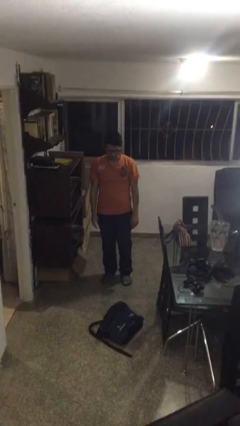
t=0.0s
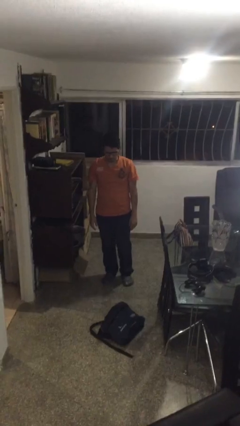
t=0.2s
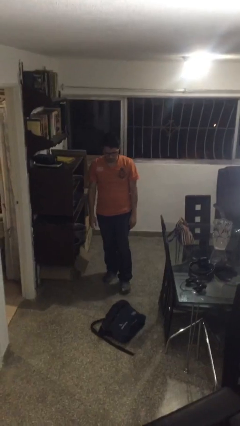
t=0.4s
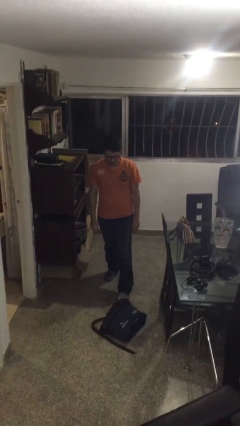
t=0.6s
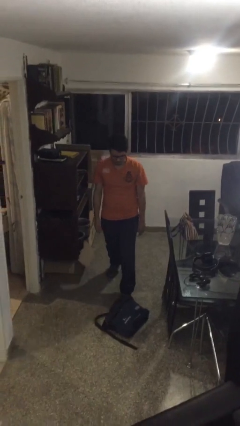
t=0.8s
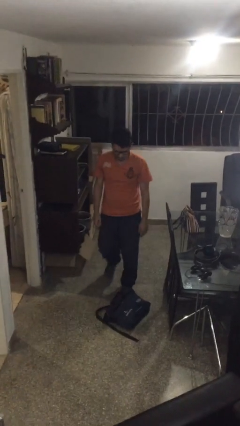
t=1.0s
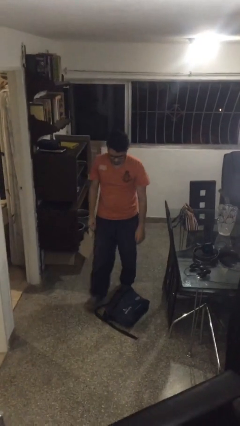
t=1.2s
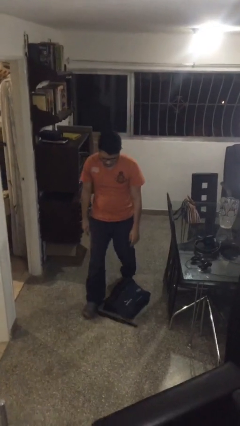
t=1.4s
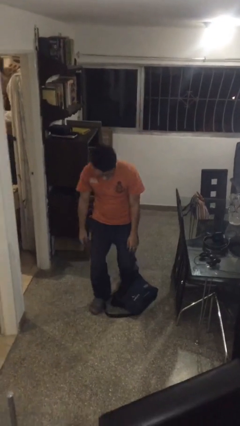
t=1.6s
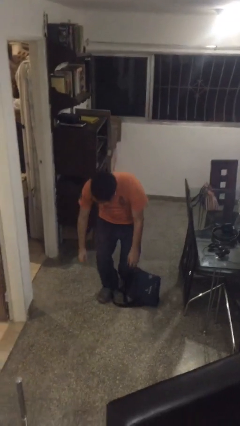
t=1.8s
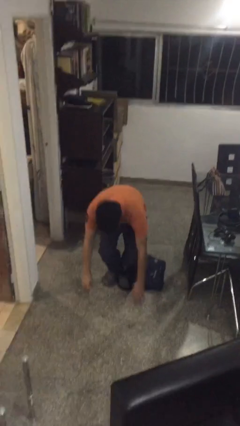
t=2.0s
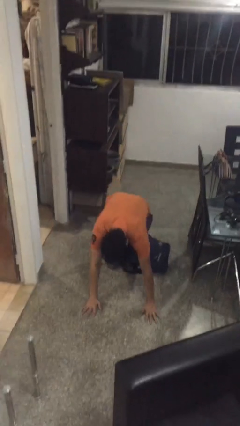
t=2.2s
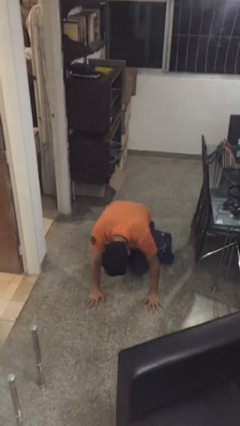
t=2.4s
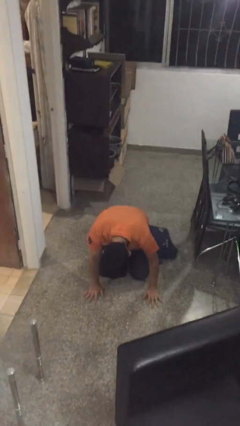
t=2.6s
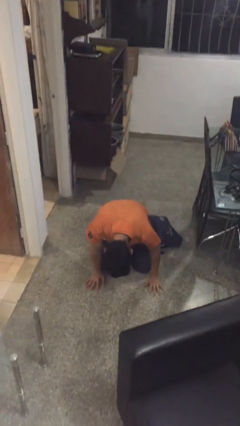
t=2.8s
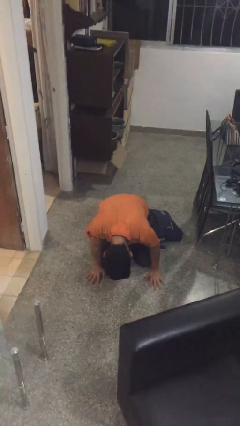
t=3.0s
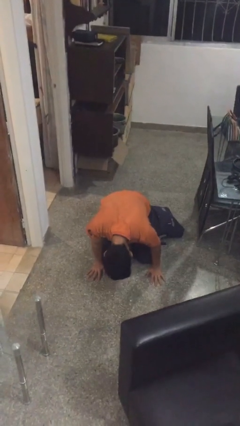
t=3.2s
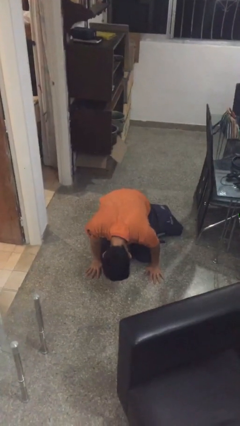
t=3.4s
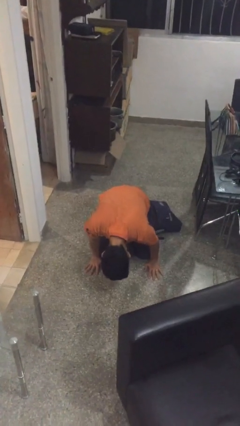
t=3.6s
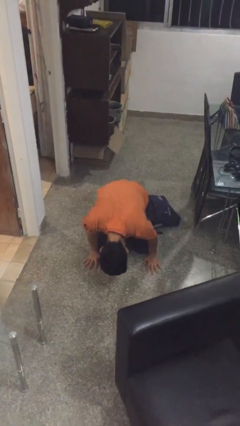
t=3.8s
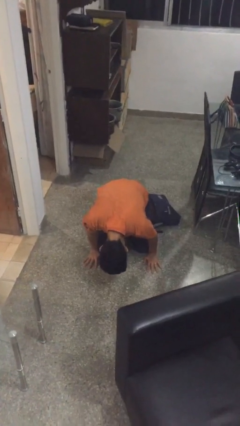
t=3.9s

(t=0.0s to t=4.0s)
person trips on object on floor

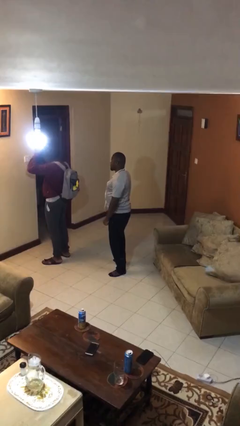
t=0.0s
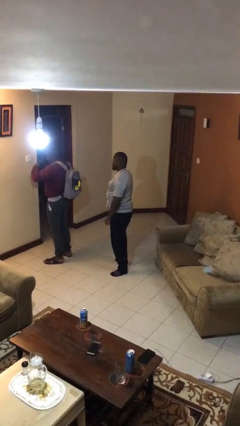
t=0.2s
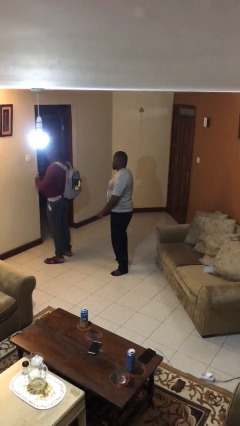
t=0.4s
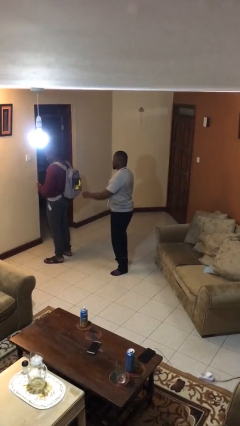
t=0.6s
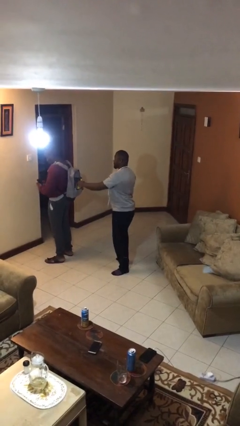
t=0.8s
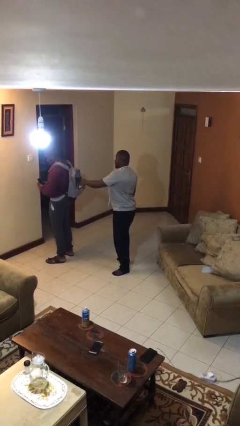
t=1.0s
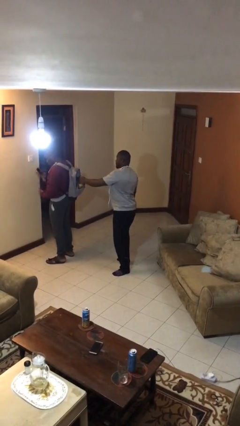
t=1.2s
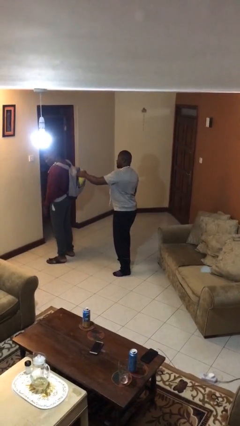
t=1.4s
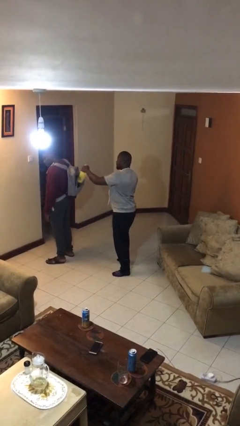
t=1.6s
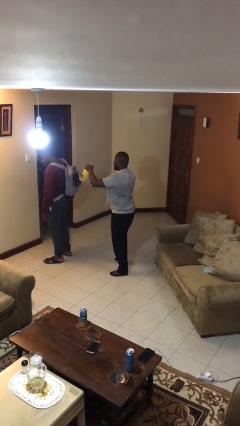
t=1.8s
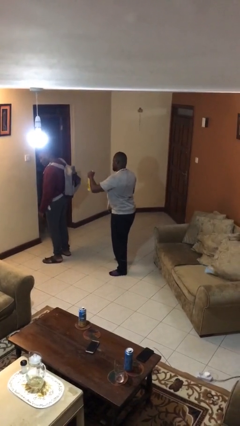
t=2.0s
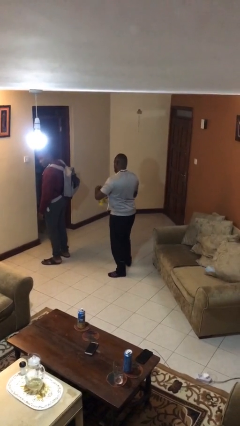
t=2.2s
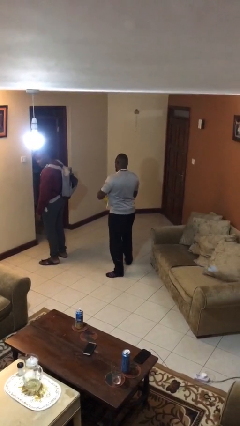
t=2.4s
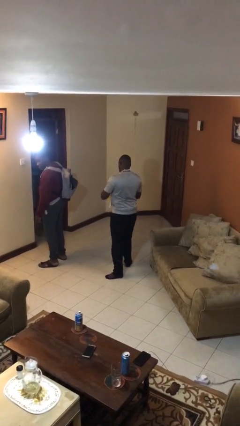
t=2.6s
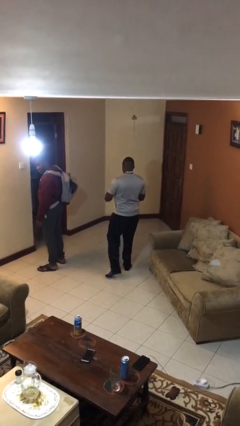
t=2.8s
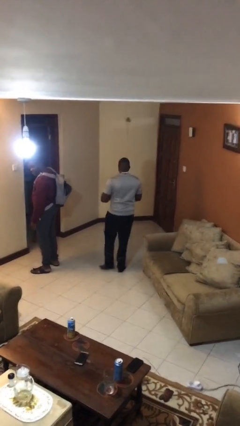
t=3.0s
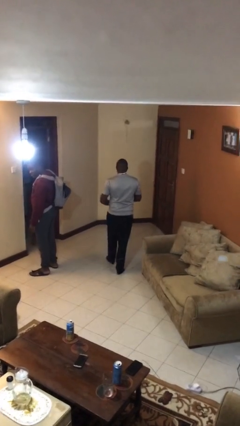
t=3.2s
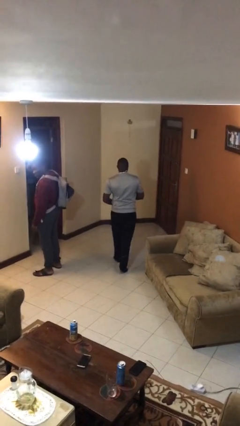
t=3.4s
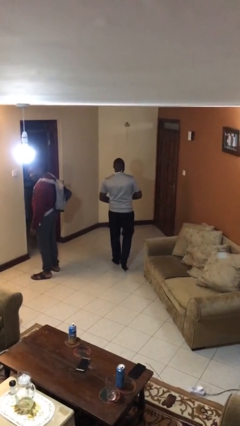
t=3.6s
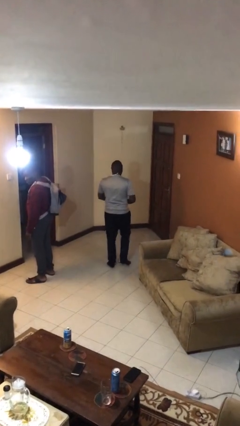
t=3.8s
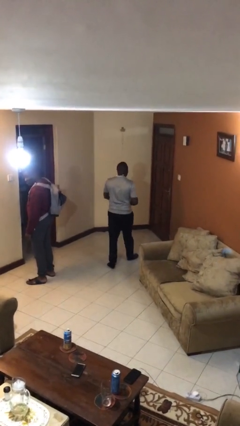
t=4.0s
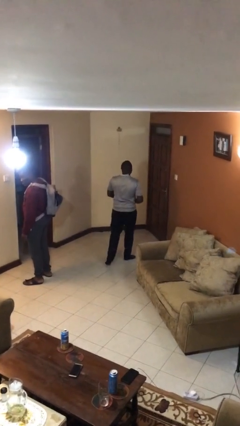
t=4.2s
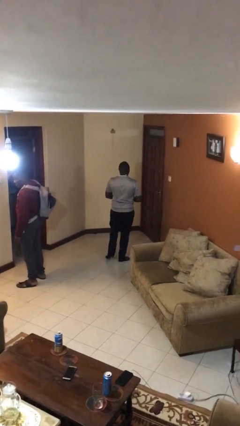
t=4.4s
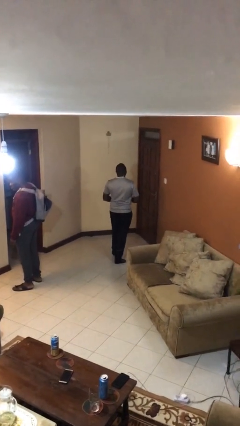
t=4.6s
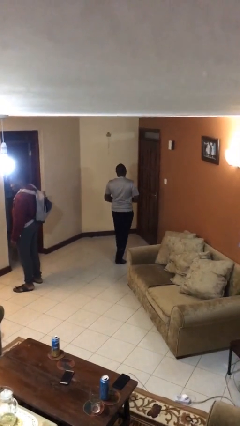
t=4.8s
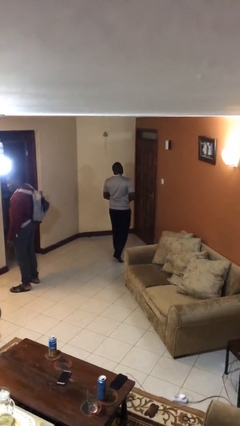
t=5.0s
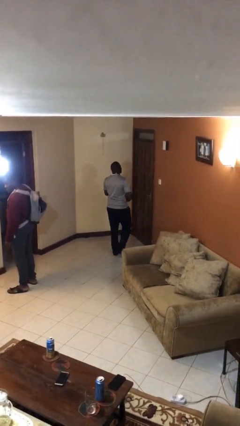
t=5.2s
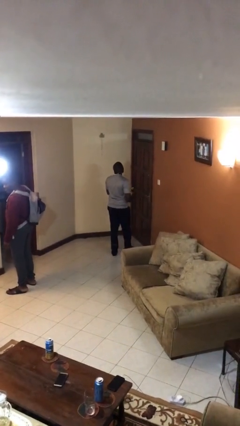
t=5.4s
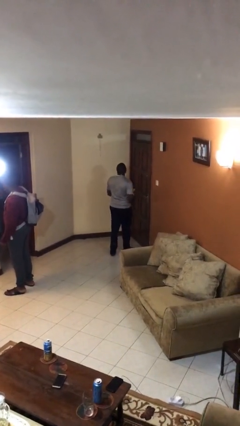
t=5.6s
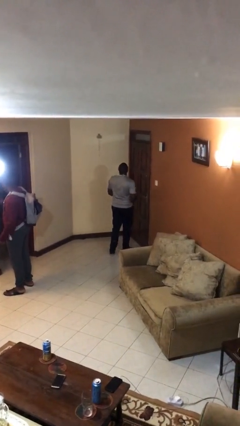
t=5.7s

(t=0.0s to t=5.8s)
person steals object from person

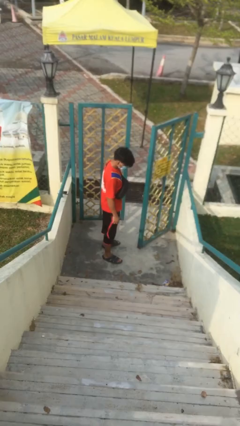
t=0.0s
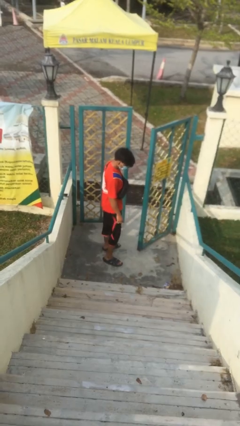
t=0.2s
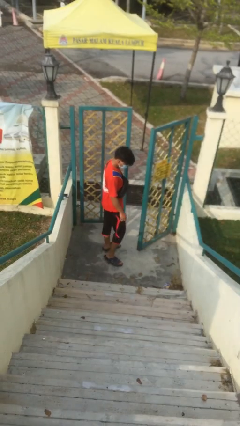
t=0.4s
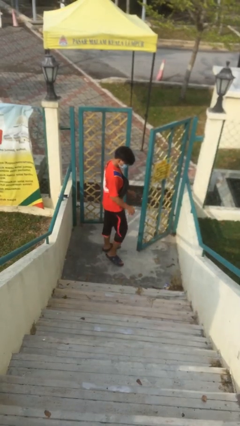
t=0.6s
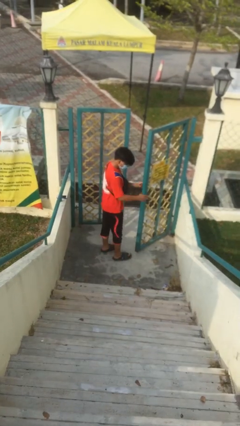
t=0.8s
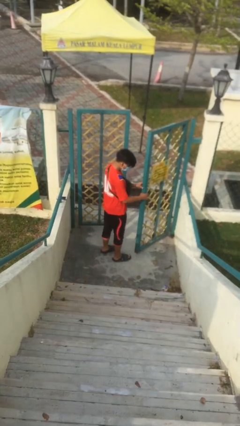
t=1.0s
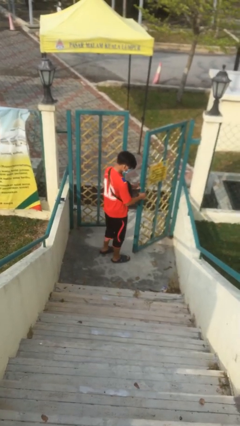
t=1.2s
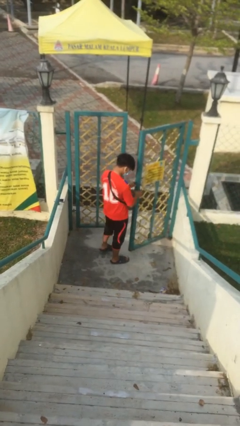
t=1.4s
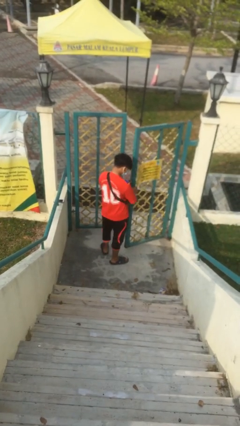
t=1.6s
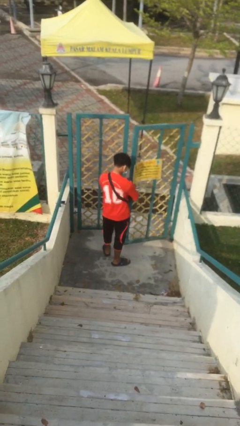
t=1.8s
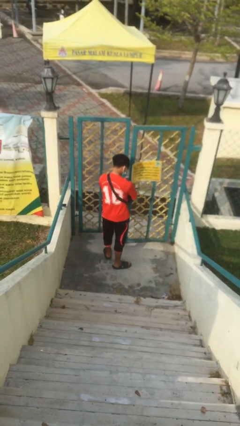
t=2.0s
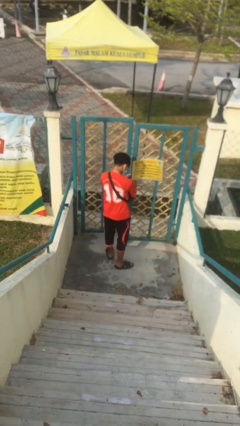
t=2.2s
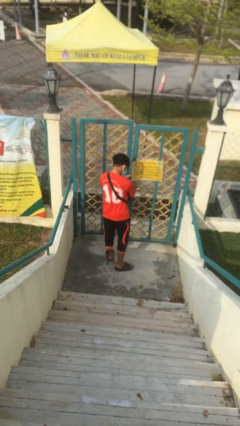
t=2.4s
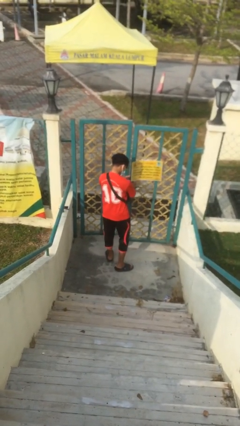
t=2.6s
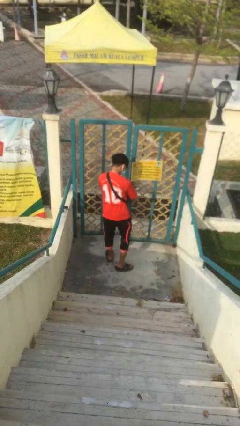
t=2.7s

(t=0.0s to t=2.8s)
person closes facility door

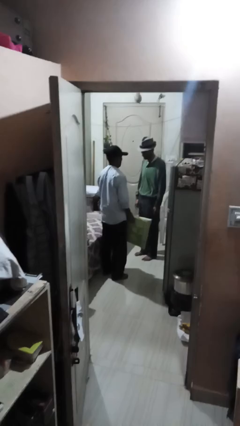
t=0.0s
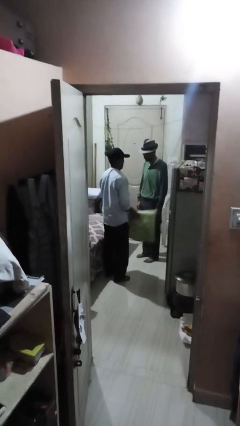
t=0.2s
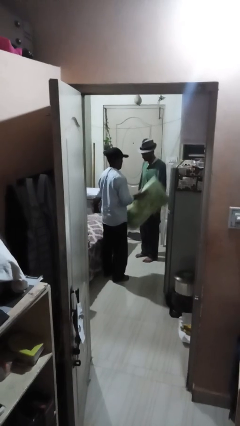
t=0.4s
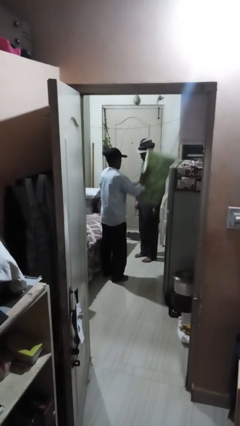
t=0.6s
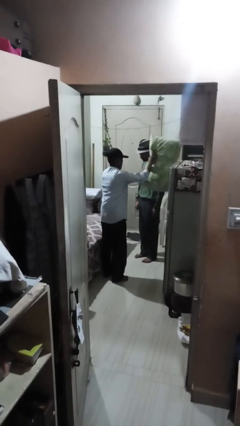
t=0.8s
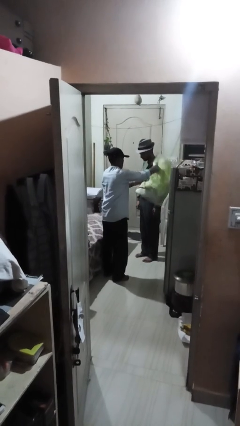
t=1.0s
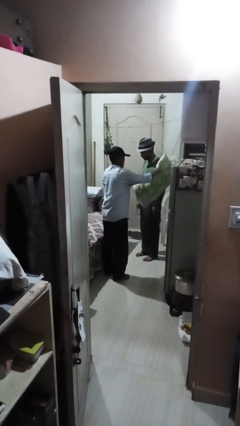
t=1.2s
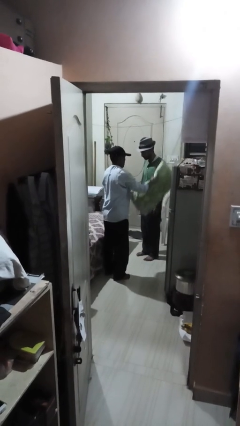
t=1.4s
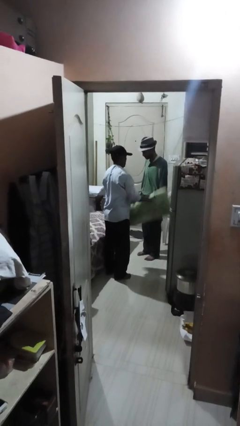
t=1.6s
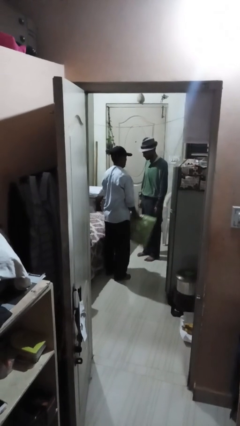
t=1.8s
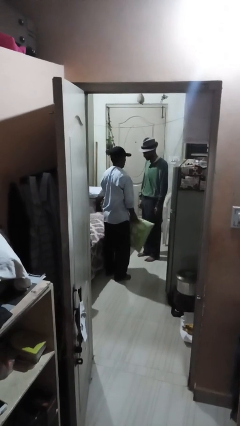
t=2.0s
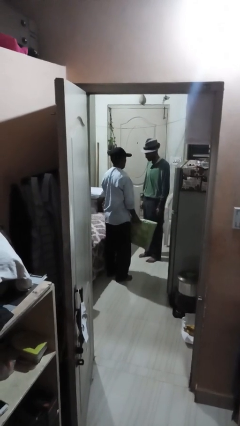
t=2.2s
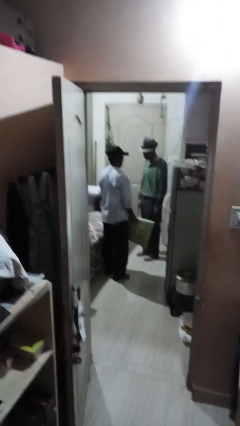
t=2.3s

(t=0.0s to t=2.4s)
person hits person with pillow

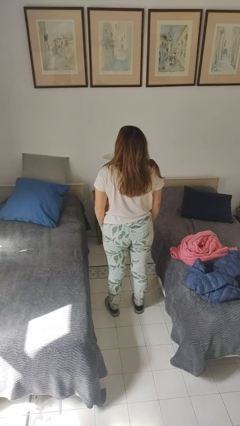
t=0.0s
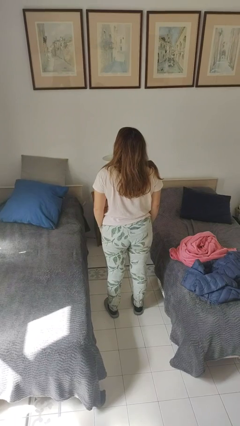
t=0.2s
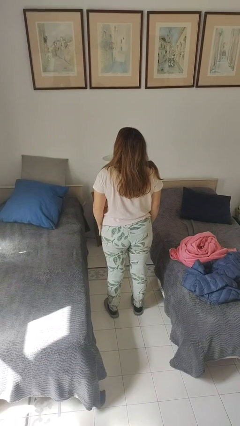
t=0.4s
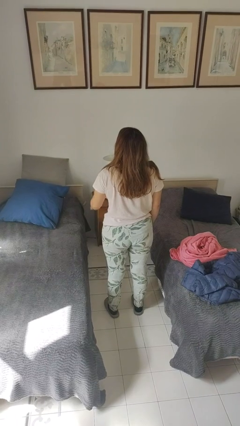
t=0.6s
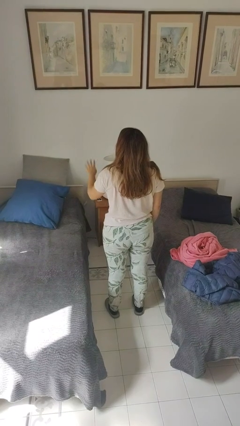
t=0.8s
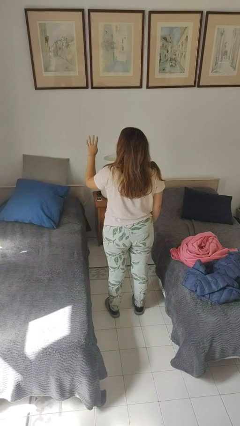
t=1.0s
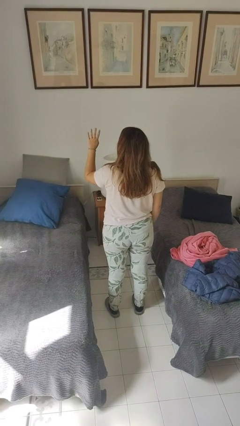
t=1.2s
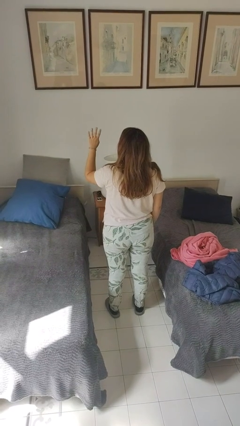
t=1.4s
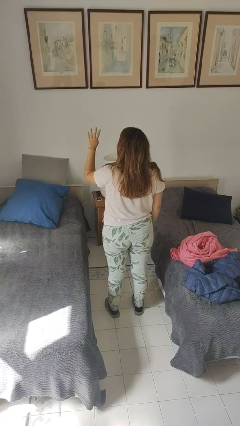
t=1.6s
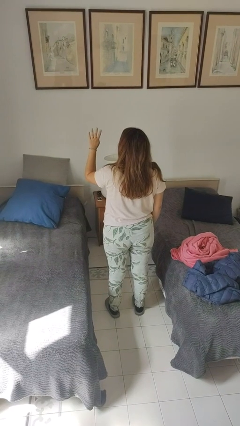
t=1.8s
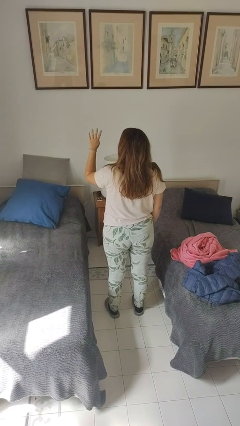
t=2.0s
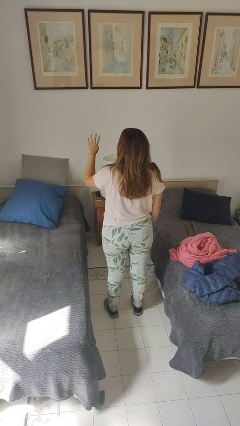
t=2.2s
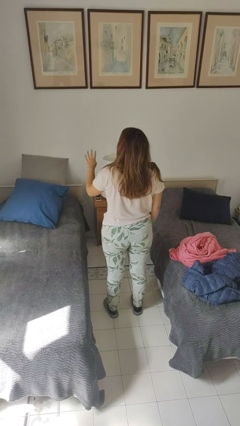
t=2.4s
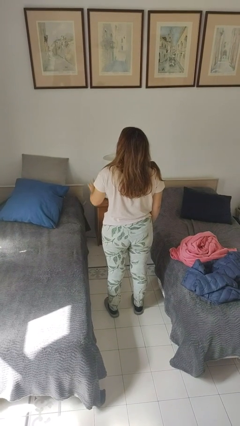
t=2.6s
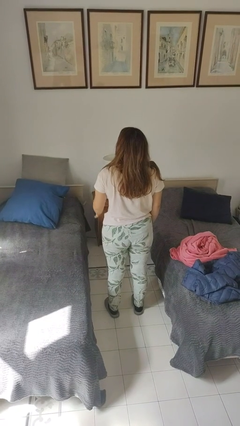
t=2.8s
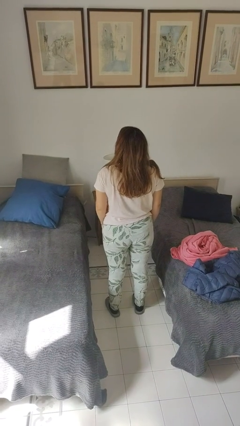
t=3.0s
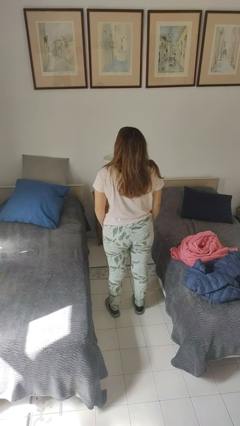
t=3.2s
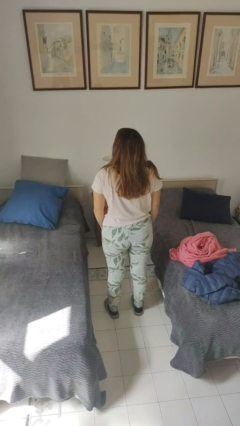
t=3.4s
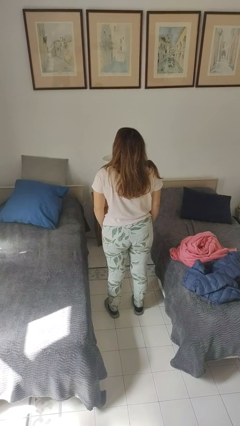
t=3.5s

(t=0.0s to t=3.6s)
person gestures number four
